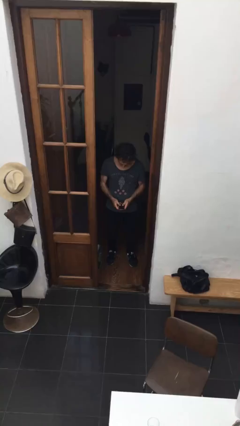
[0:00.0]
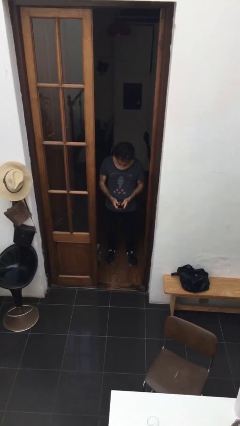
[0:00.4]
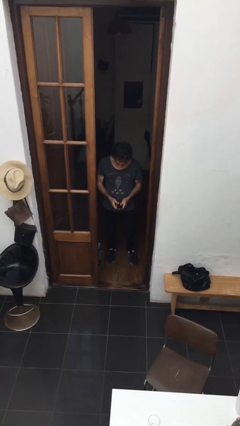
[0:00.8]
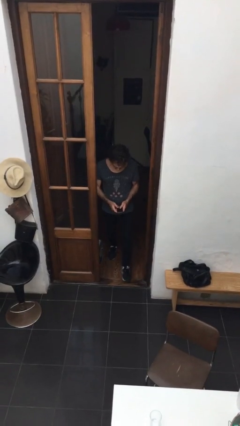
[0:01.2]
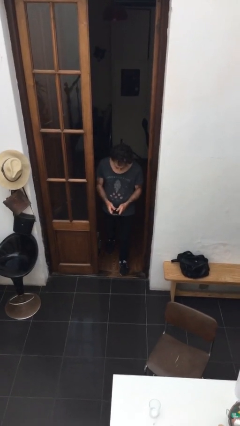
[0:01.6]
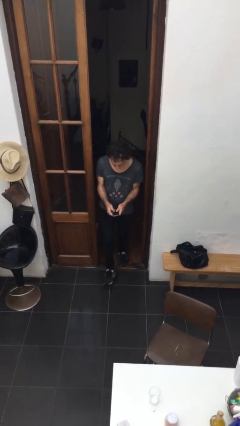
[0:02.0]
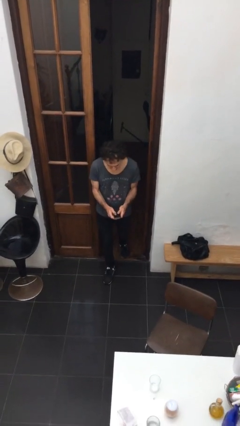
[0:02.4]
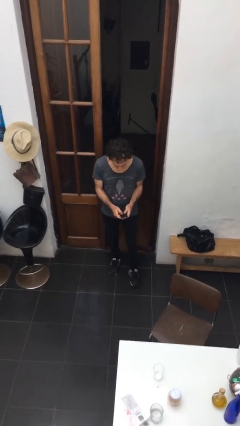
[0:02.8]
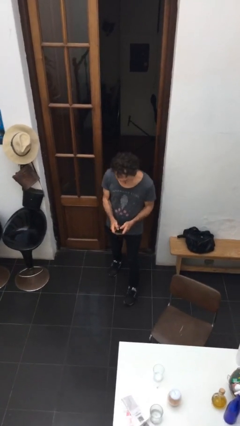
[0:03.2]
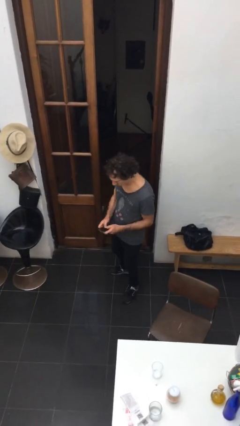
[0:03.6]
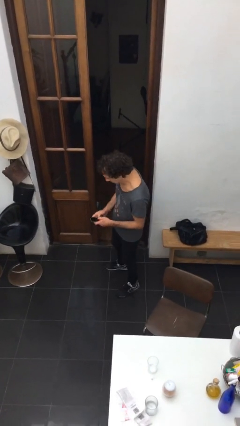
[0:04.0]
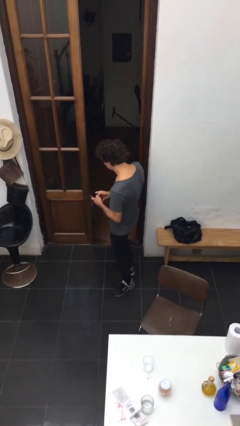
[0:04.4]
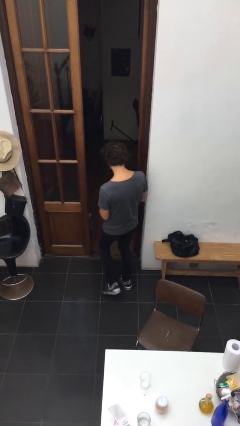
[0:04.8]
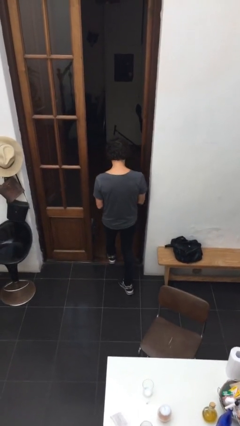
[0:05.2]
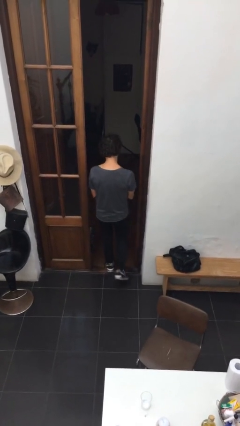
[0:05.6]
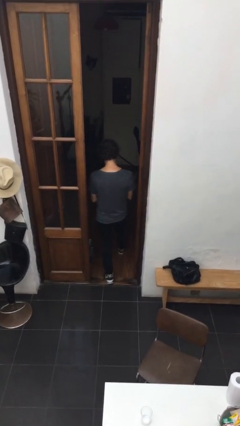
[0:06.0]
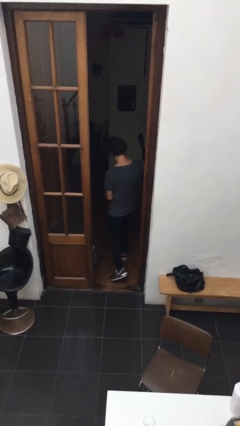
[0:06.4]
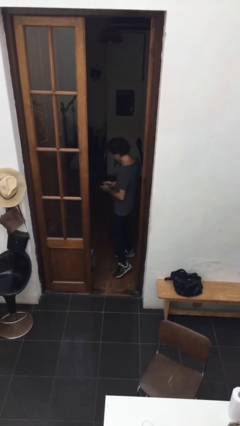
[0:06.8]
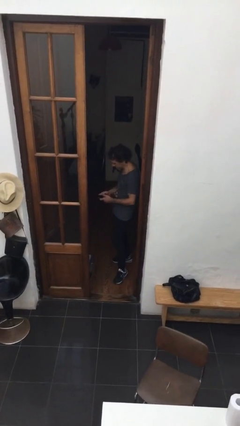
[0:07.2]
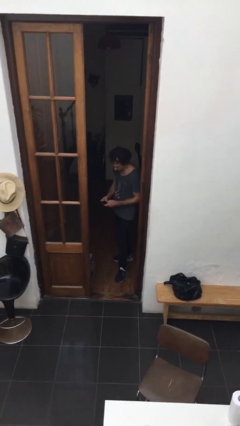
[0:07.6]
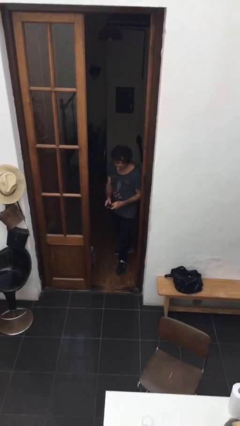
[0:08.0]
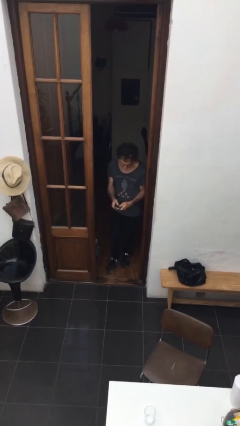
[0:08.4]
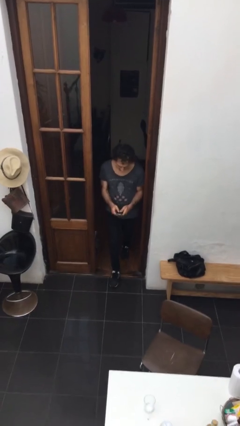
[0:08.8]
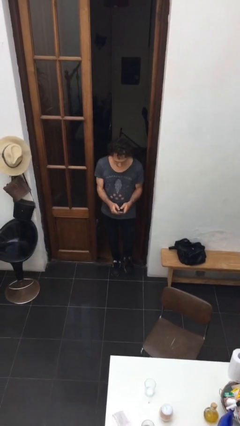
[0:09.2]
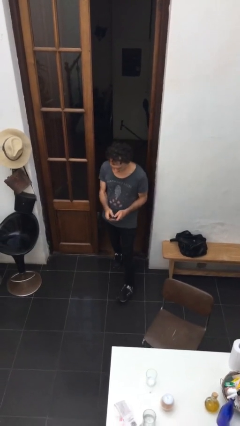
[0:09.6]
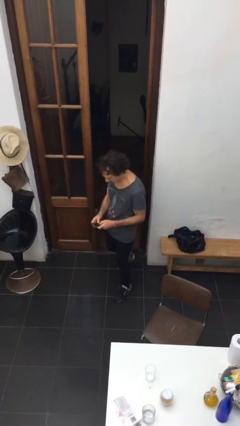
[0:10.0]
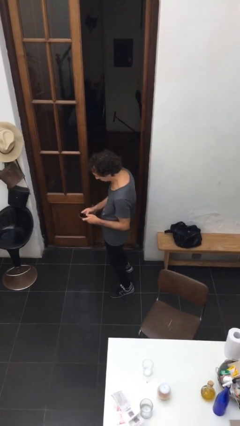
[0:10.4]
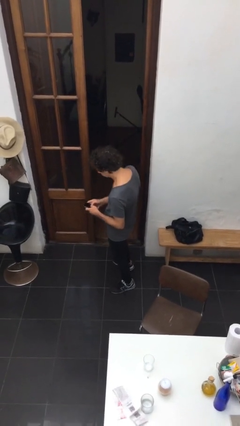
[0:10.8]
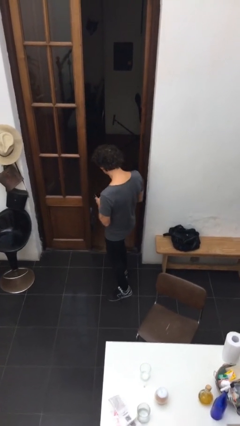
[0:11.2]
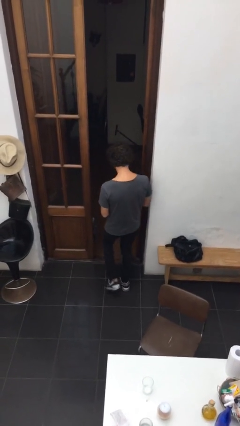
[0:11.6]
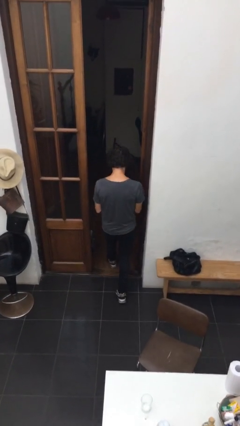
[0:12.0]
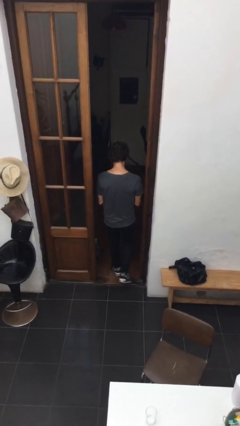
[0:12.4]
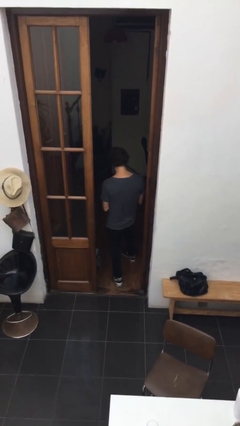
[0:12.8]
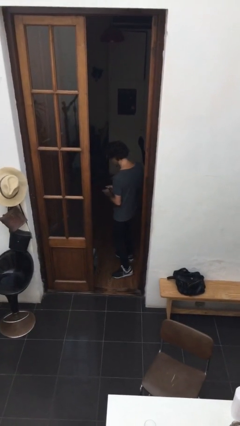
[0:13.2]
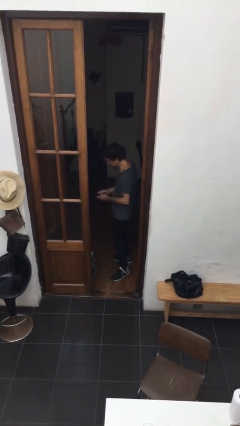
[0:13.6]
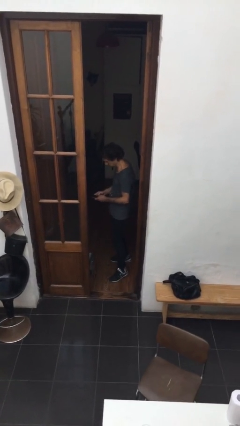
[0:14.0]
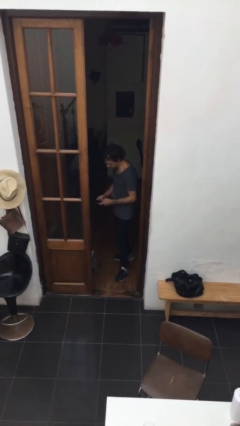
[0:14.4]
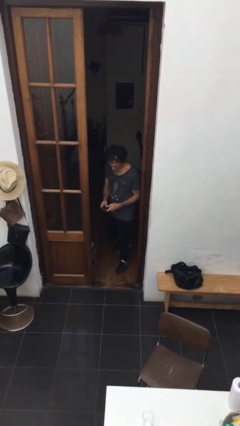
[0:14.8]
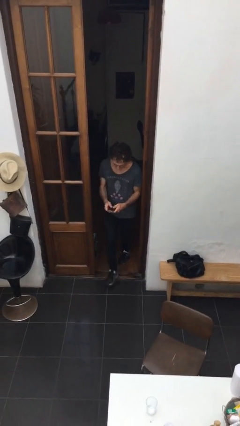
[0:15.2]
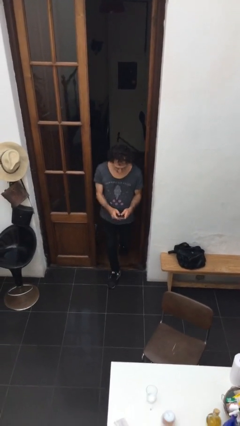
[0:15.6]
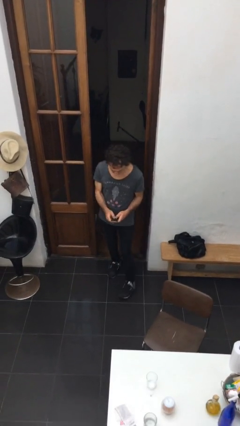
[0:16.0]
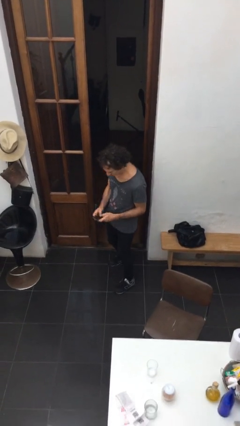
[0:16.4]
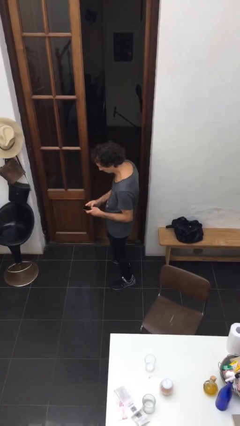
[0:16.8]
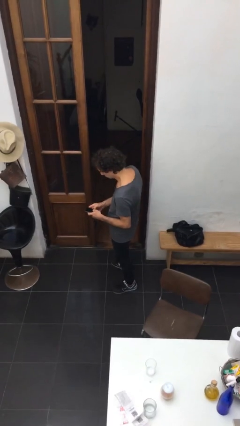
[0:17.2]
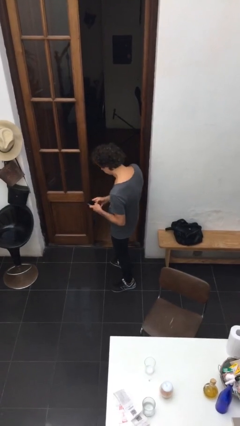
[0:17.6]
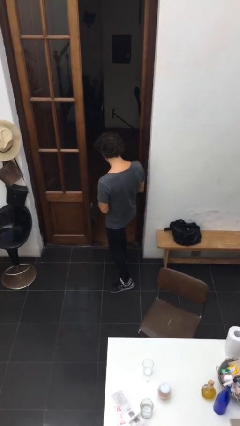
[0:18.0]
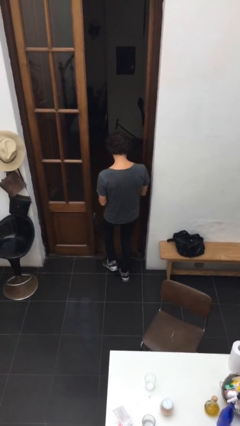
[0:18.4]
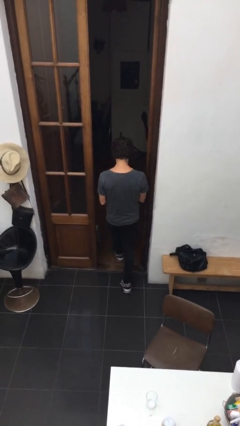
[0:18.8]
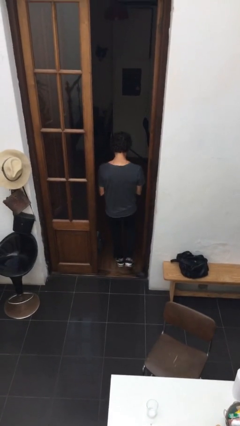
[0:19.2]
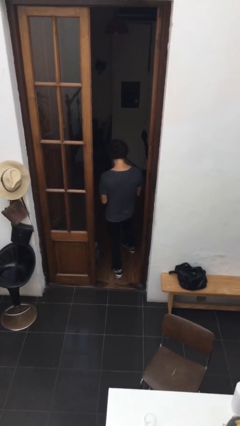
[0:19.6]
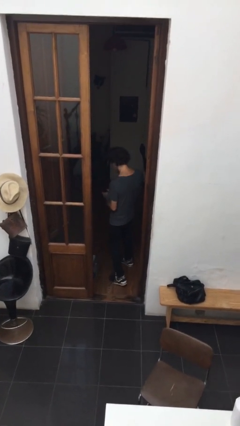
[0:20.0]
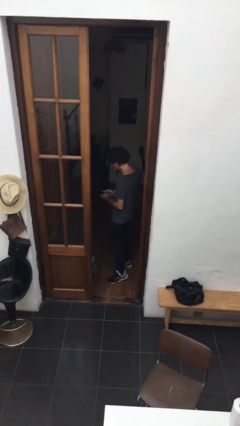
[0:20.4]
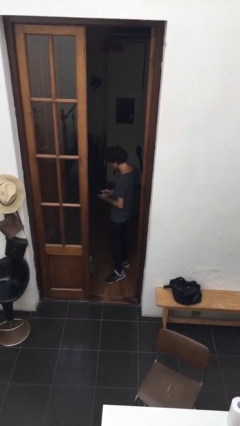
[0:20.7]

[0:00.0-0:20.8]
person texts on phone

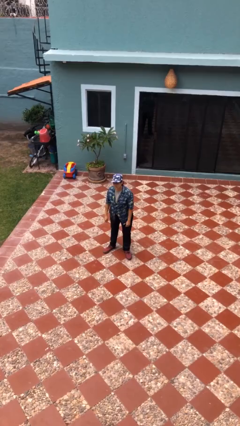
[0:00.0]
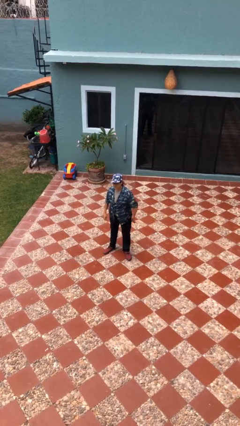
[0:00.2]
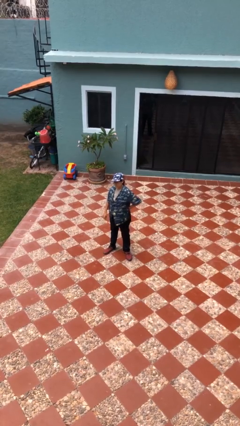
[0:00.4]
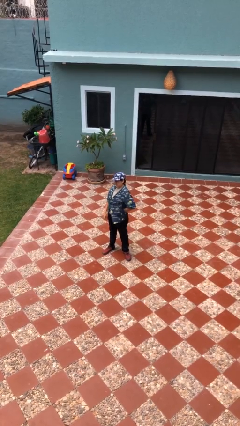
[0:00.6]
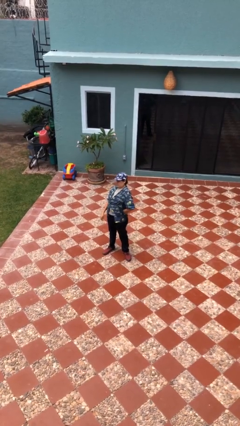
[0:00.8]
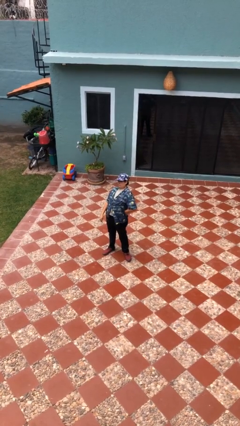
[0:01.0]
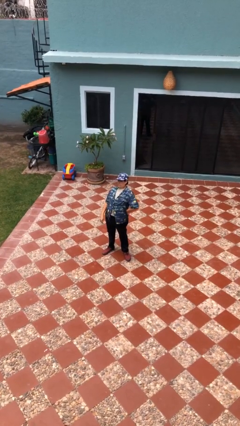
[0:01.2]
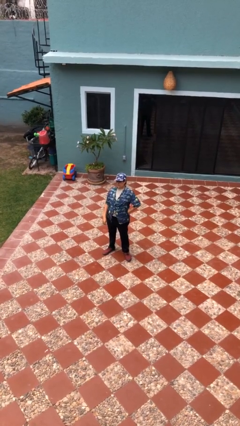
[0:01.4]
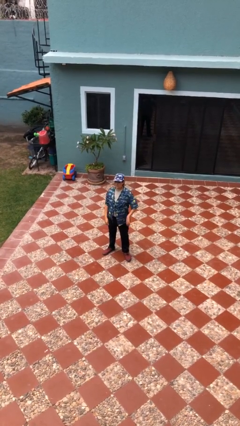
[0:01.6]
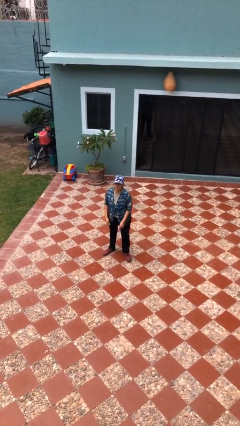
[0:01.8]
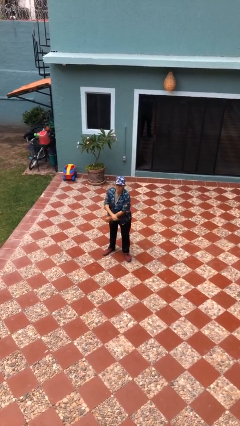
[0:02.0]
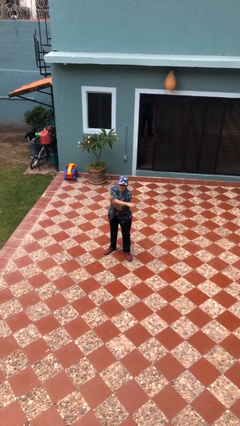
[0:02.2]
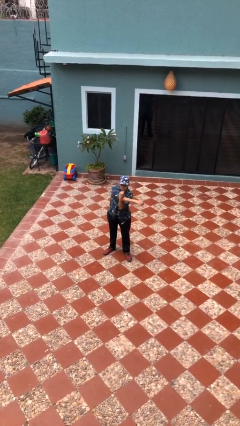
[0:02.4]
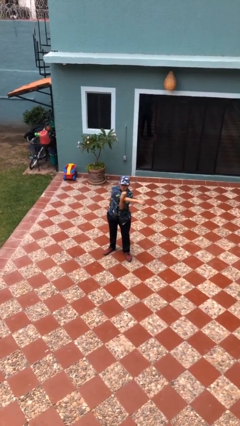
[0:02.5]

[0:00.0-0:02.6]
person stretches back

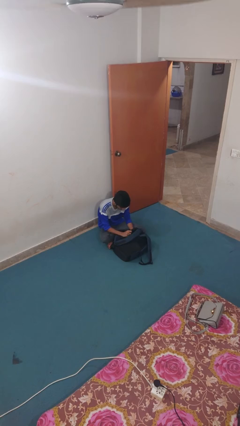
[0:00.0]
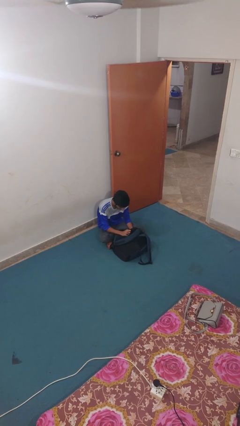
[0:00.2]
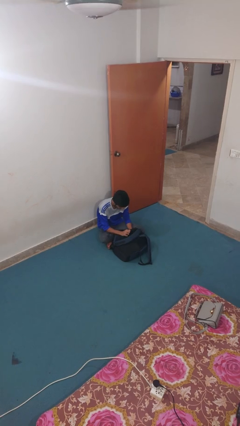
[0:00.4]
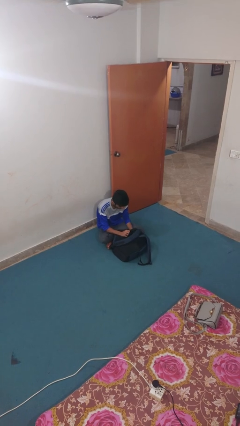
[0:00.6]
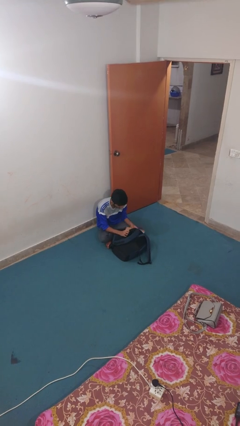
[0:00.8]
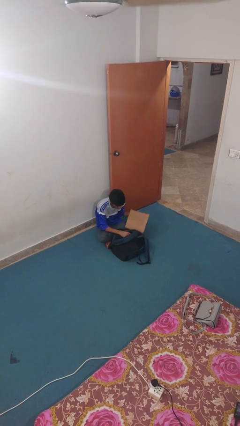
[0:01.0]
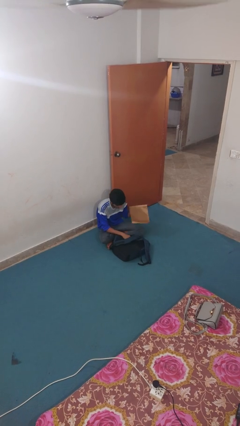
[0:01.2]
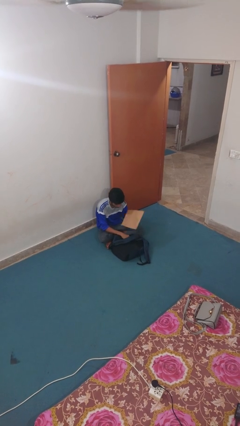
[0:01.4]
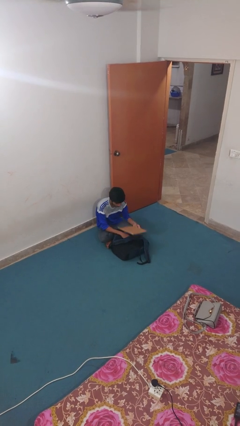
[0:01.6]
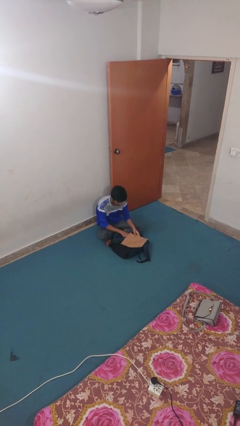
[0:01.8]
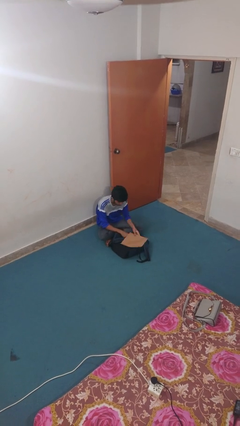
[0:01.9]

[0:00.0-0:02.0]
person takes object from backpack

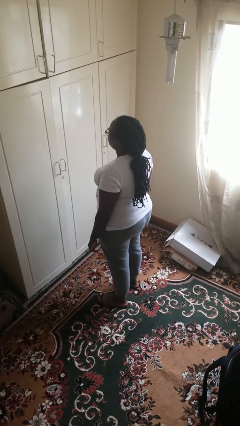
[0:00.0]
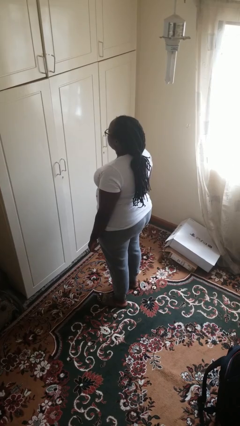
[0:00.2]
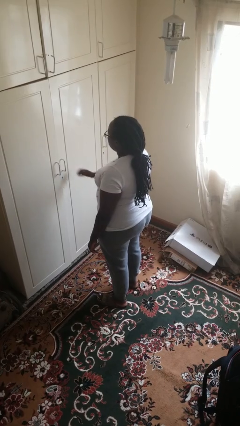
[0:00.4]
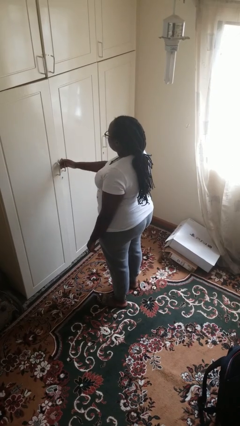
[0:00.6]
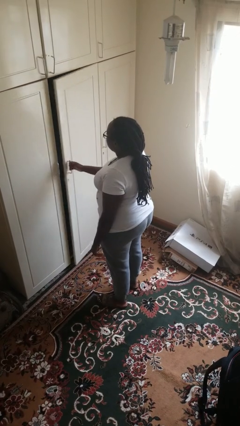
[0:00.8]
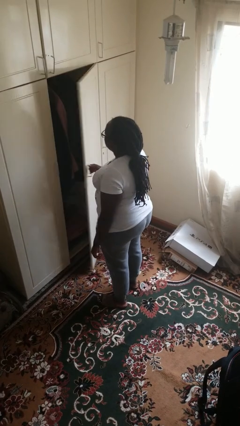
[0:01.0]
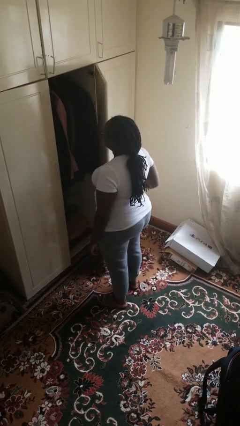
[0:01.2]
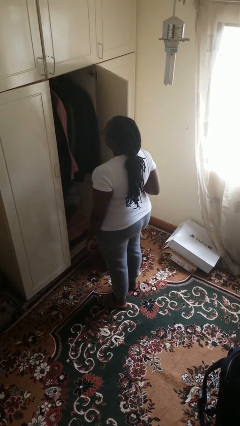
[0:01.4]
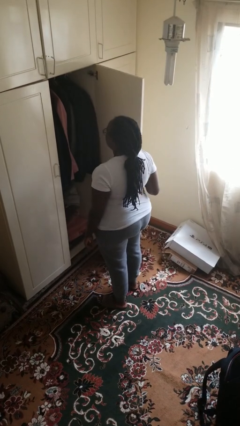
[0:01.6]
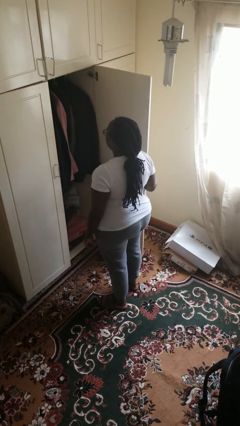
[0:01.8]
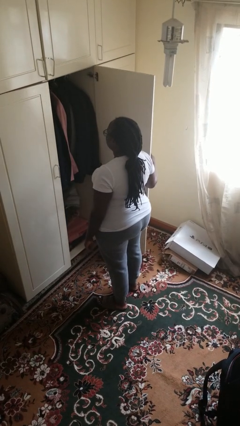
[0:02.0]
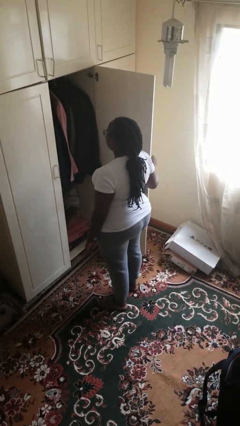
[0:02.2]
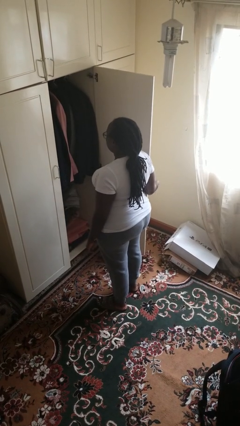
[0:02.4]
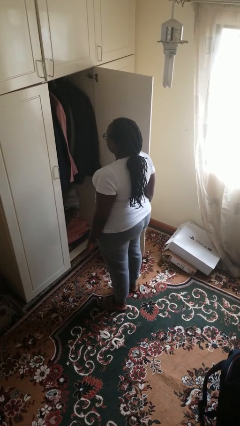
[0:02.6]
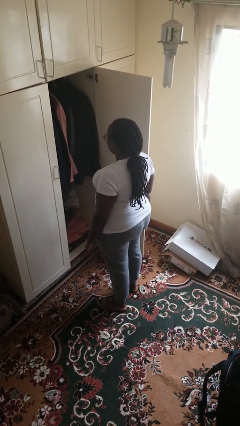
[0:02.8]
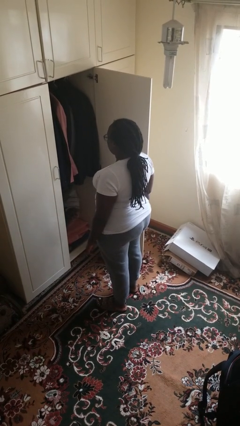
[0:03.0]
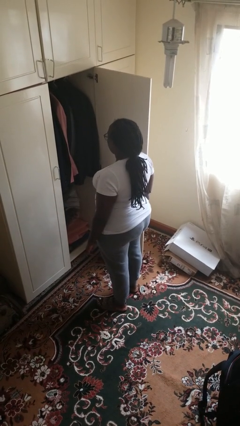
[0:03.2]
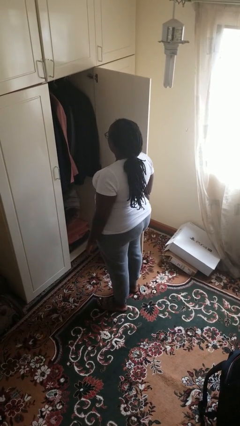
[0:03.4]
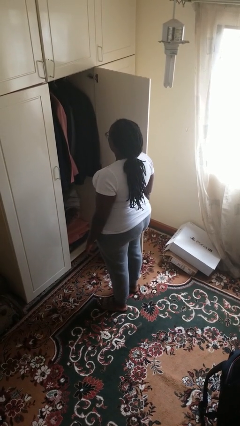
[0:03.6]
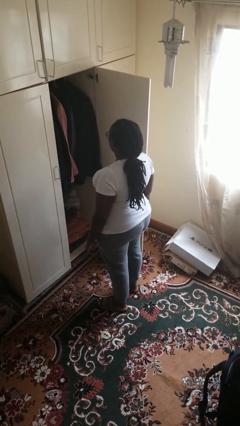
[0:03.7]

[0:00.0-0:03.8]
person opens closet door
